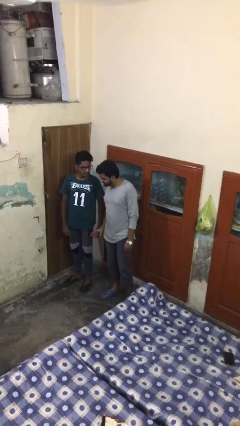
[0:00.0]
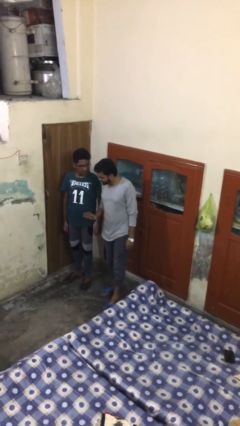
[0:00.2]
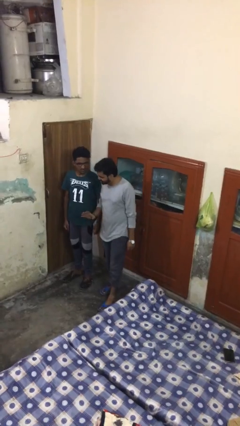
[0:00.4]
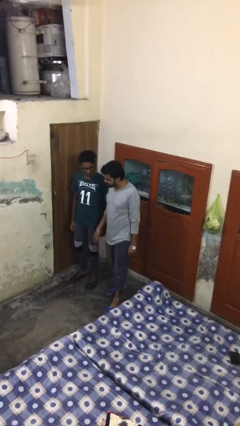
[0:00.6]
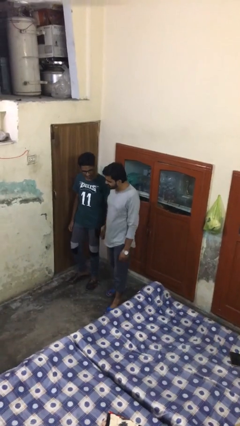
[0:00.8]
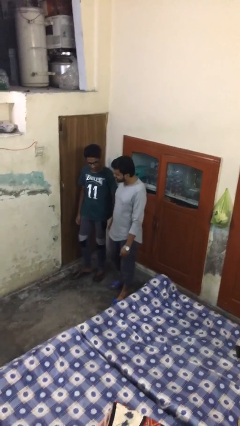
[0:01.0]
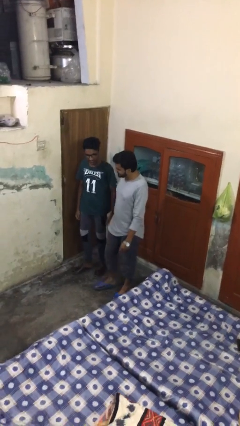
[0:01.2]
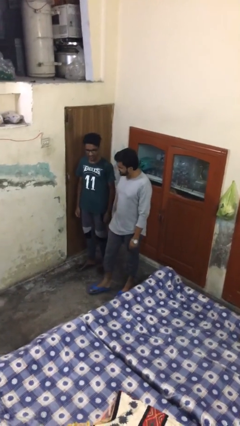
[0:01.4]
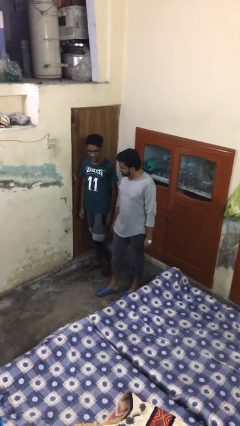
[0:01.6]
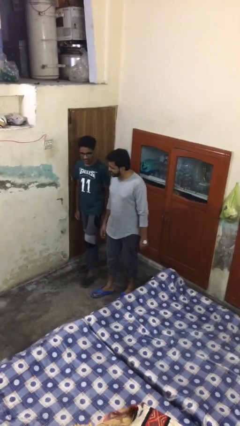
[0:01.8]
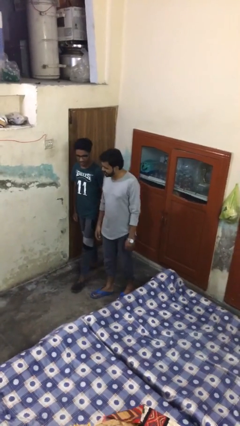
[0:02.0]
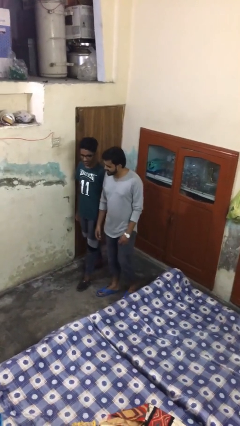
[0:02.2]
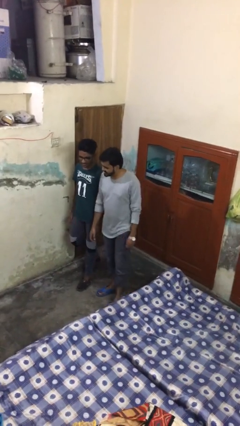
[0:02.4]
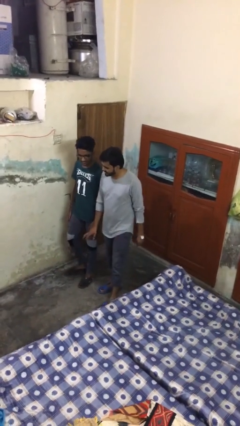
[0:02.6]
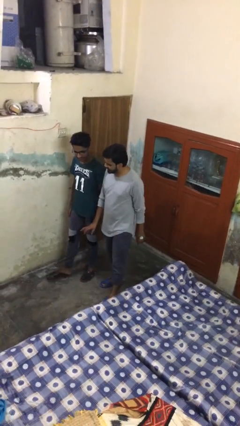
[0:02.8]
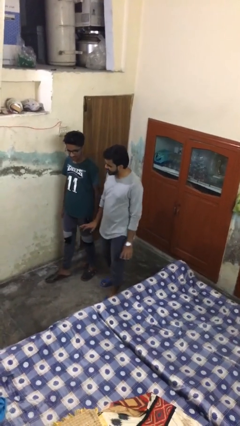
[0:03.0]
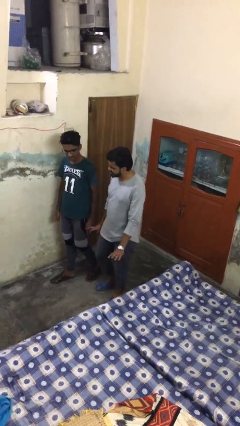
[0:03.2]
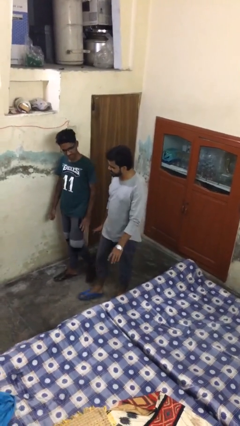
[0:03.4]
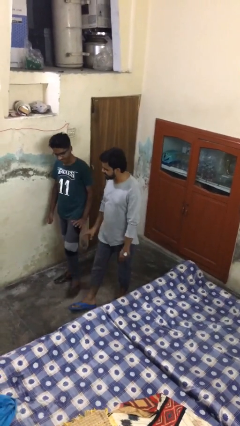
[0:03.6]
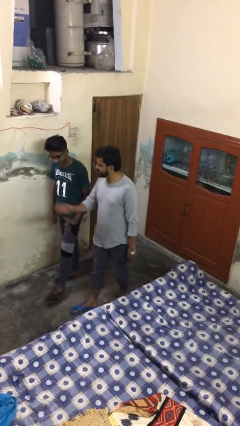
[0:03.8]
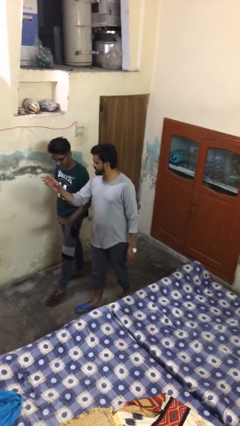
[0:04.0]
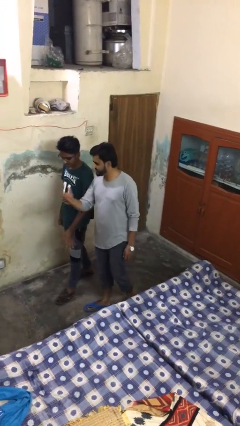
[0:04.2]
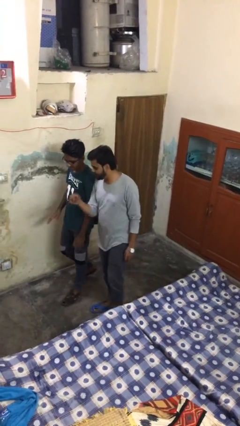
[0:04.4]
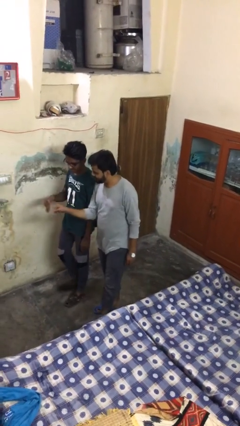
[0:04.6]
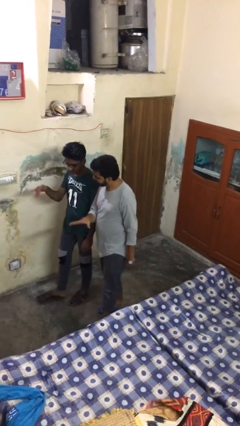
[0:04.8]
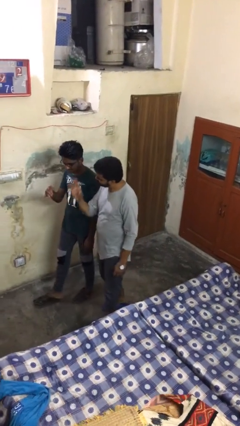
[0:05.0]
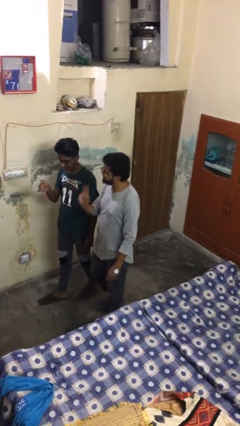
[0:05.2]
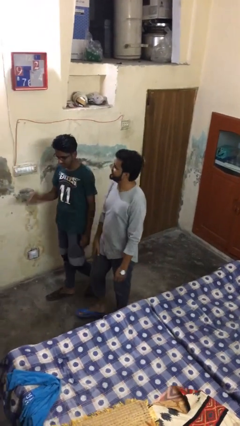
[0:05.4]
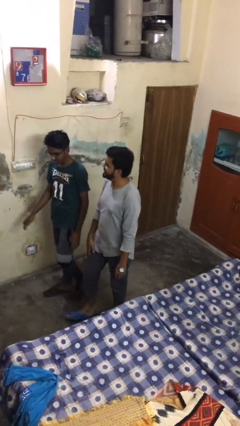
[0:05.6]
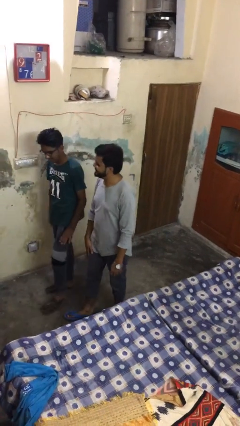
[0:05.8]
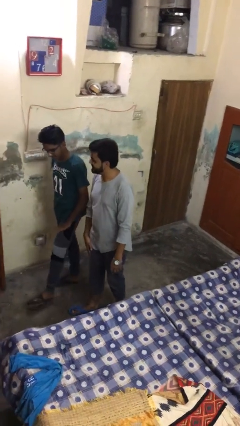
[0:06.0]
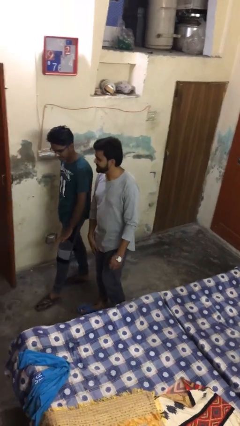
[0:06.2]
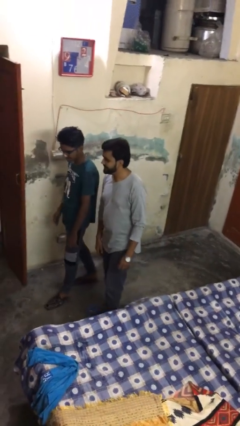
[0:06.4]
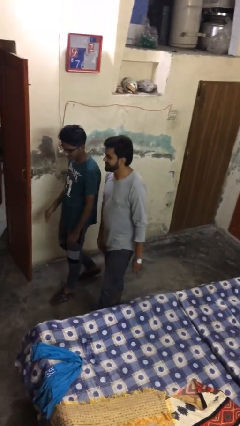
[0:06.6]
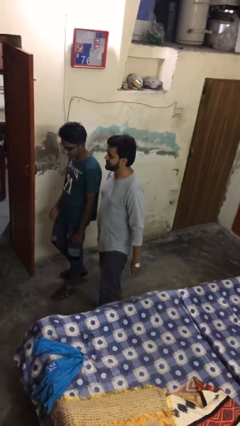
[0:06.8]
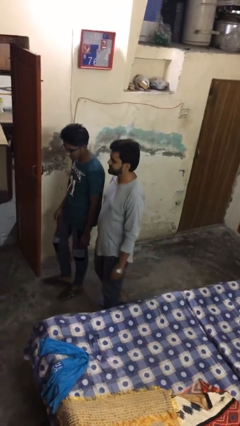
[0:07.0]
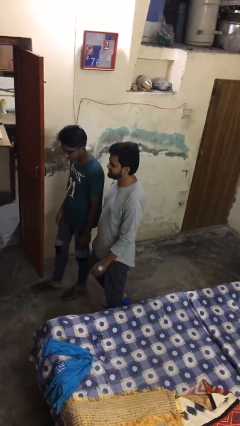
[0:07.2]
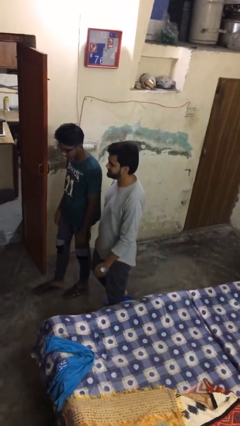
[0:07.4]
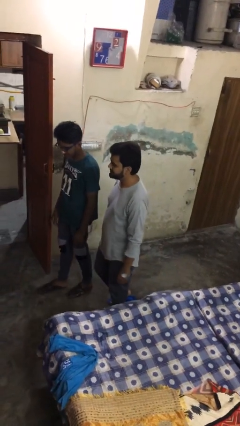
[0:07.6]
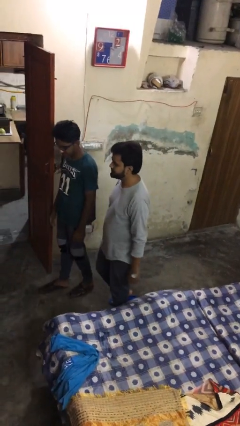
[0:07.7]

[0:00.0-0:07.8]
person talks to person

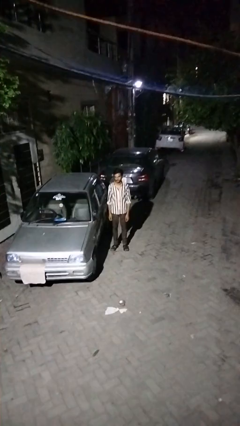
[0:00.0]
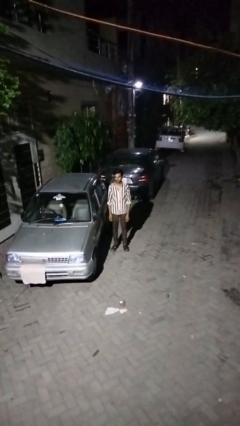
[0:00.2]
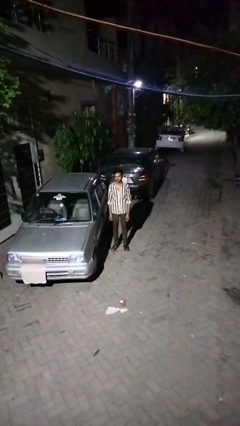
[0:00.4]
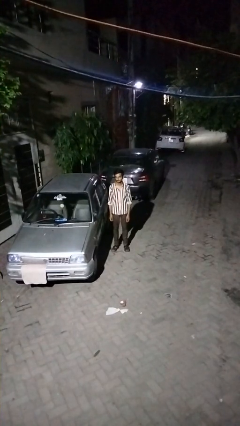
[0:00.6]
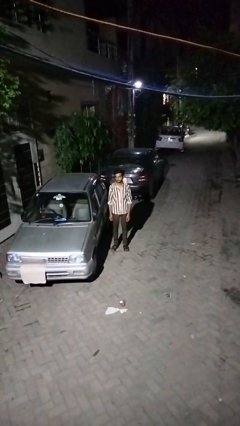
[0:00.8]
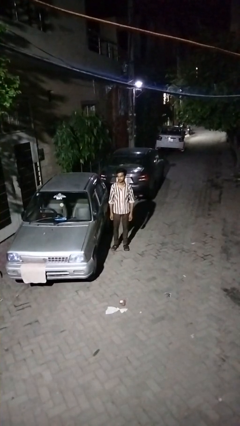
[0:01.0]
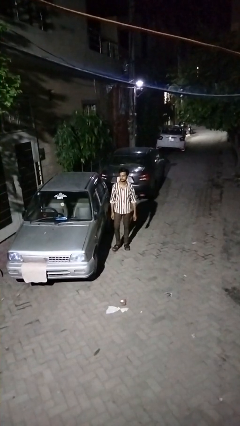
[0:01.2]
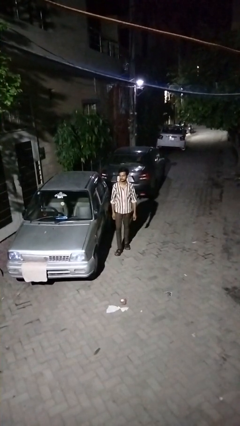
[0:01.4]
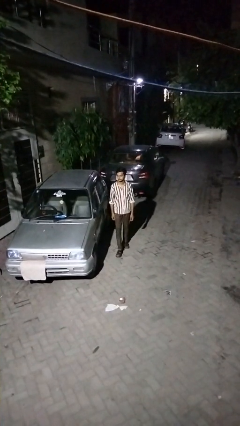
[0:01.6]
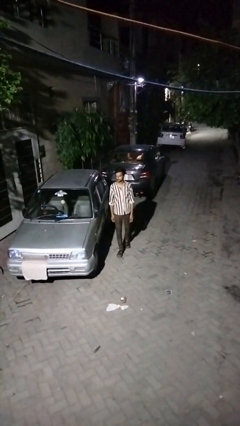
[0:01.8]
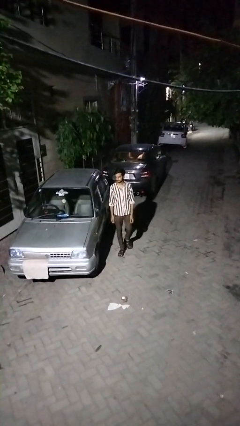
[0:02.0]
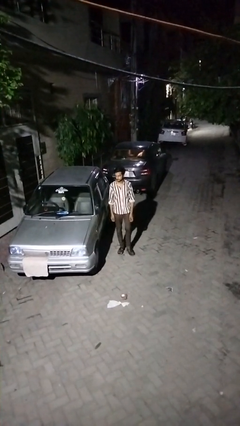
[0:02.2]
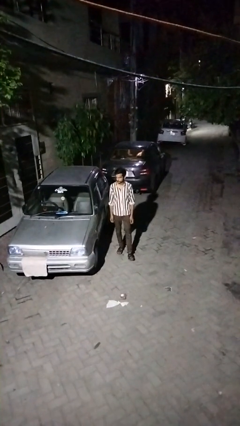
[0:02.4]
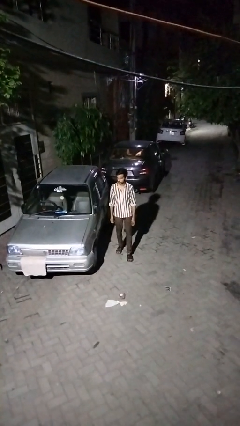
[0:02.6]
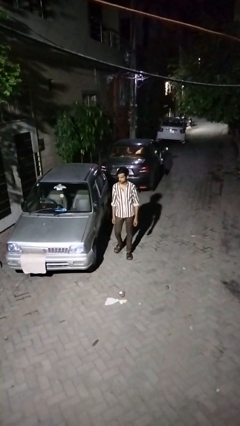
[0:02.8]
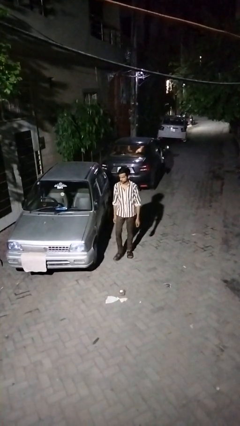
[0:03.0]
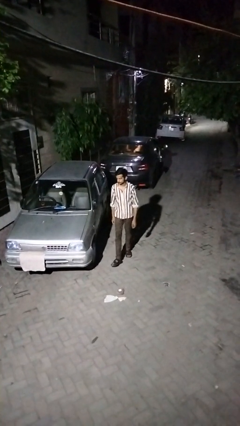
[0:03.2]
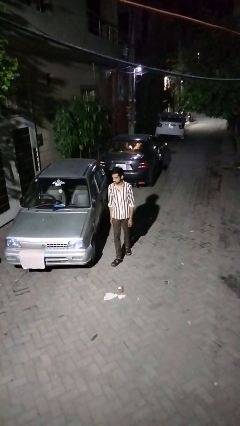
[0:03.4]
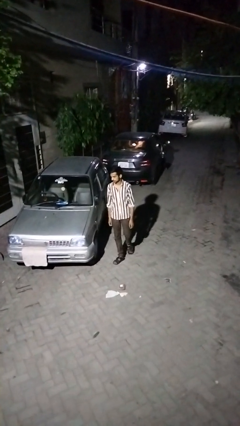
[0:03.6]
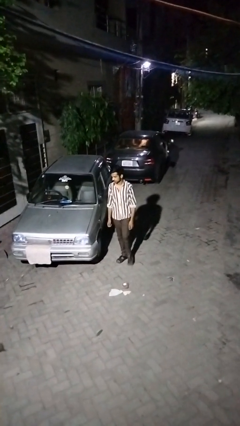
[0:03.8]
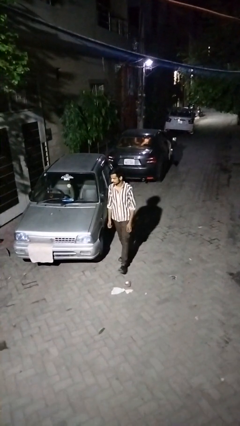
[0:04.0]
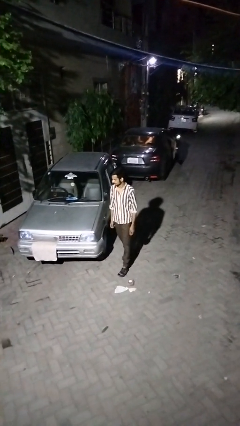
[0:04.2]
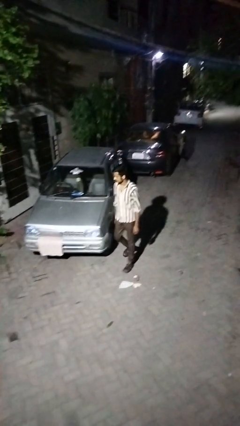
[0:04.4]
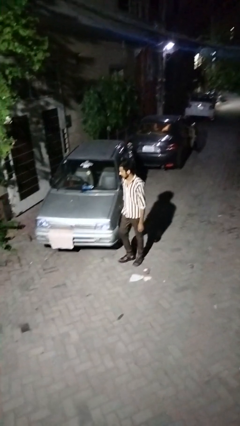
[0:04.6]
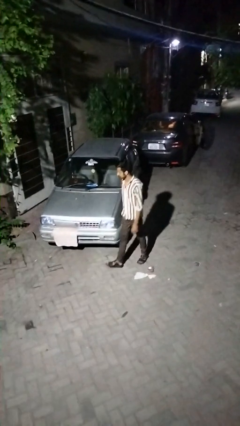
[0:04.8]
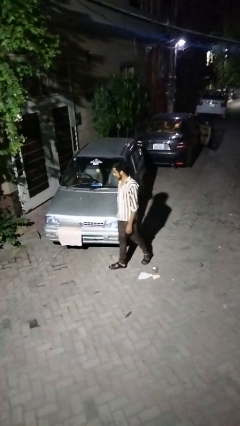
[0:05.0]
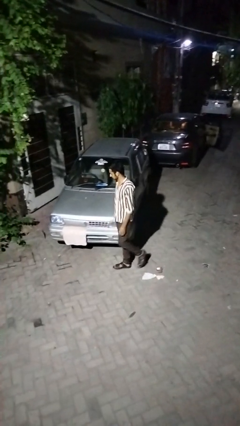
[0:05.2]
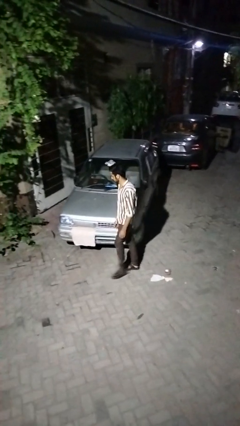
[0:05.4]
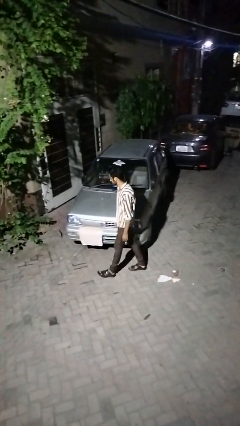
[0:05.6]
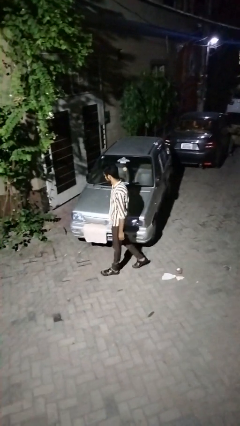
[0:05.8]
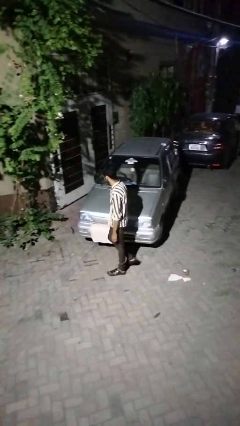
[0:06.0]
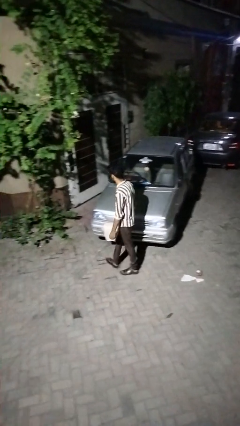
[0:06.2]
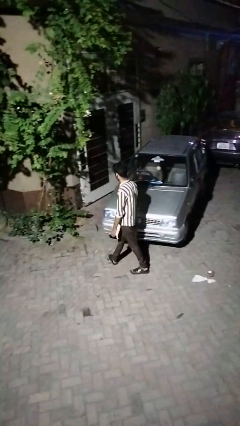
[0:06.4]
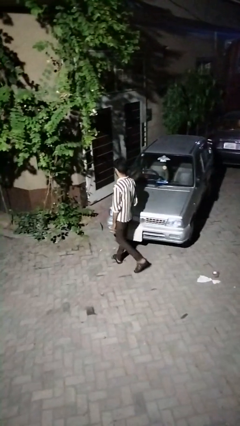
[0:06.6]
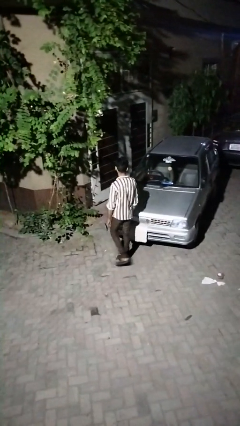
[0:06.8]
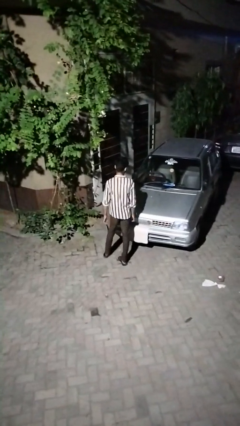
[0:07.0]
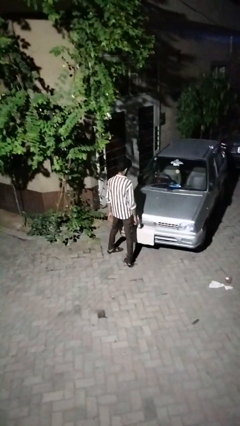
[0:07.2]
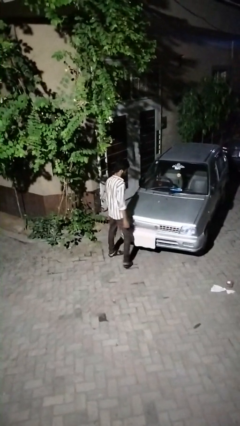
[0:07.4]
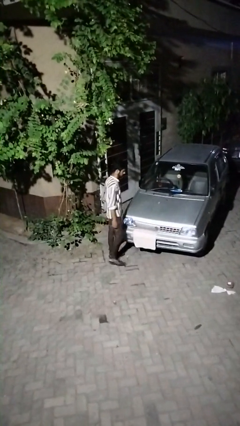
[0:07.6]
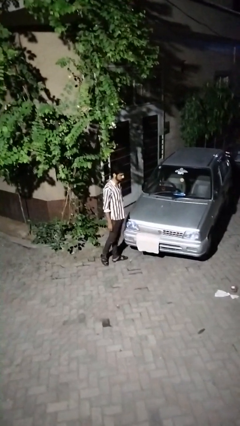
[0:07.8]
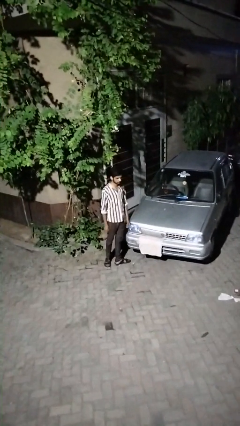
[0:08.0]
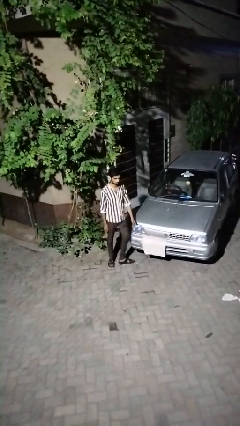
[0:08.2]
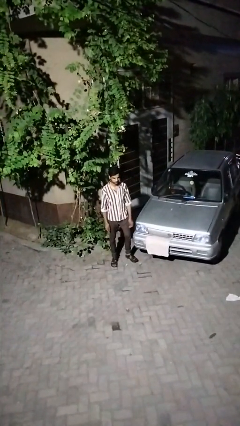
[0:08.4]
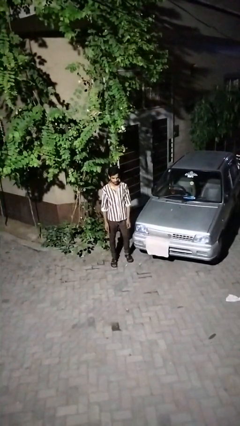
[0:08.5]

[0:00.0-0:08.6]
person walks around car

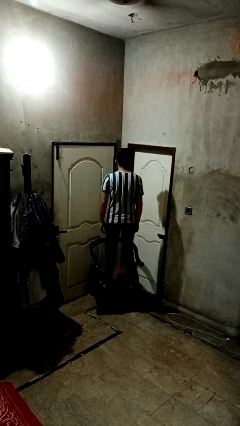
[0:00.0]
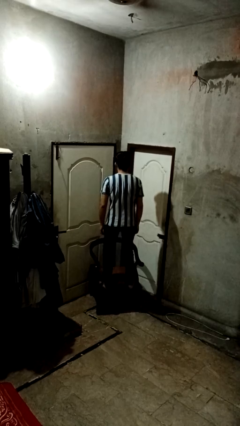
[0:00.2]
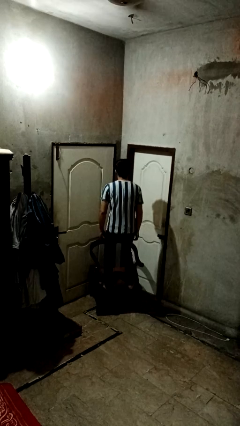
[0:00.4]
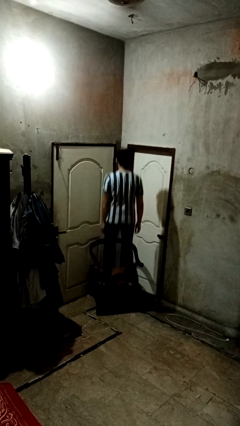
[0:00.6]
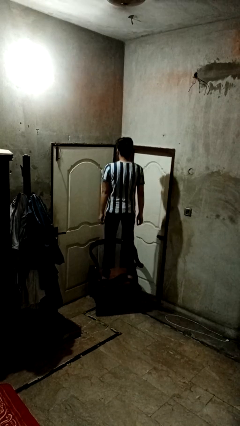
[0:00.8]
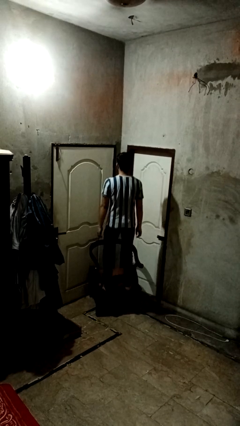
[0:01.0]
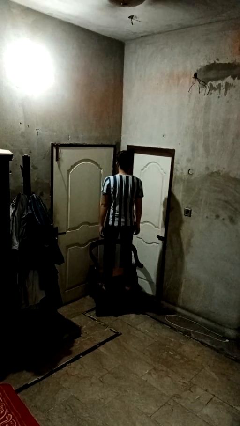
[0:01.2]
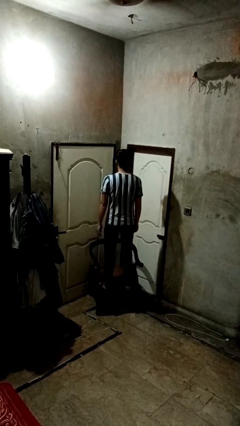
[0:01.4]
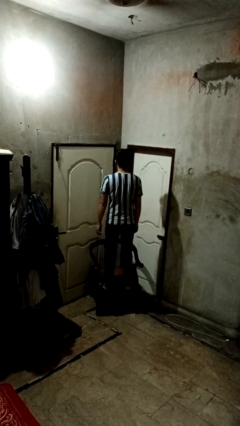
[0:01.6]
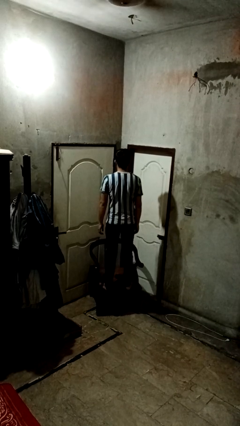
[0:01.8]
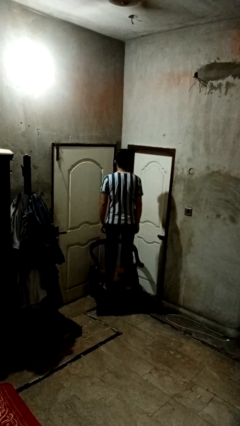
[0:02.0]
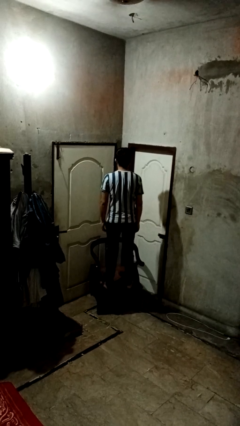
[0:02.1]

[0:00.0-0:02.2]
person jumps on couch
